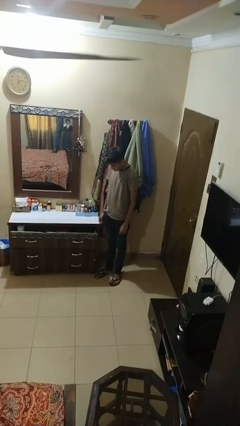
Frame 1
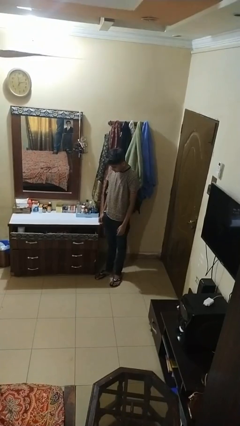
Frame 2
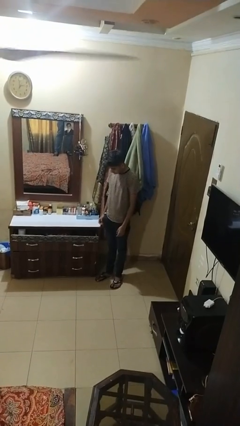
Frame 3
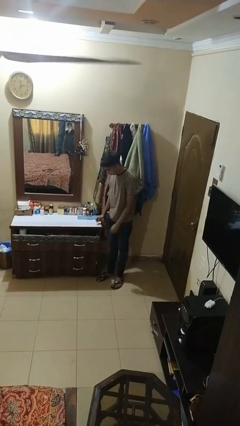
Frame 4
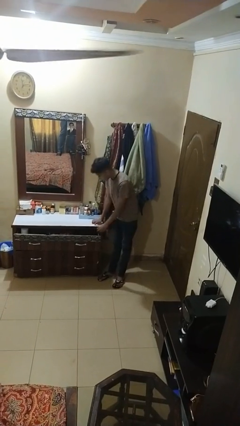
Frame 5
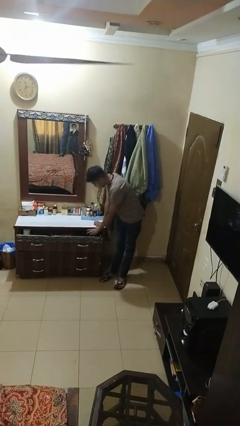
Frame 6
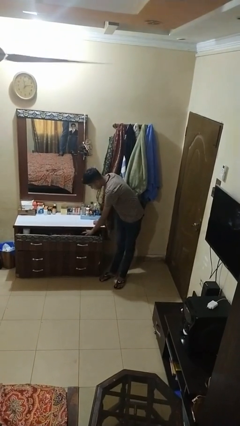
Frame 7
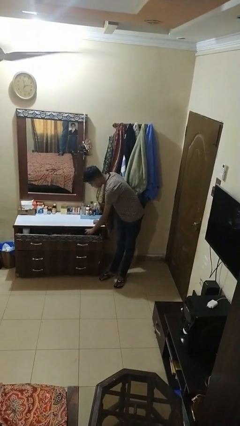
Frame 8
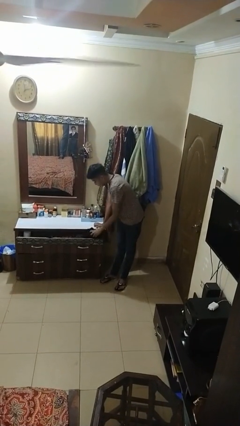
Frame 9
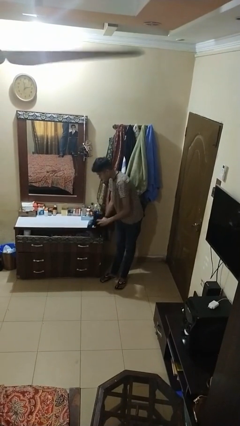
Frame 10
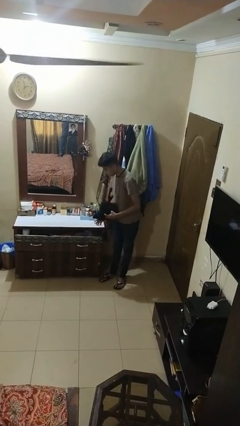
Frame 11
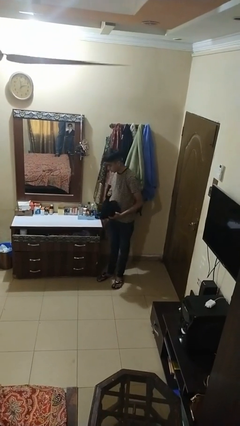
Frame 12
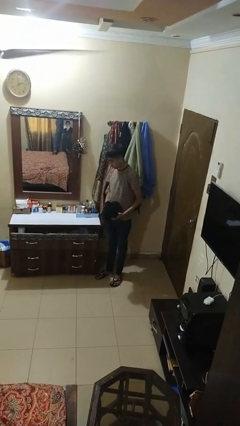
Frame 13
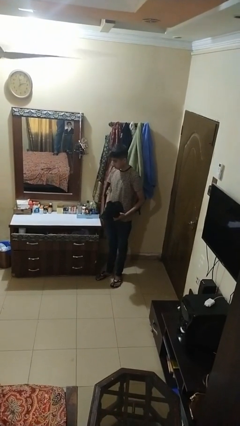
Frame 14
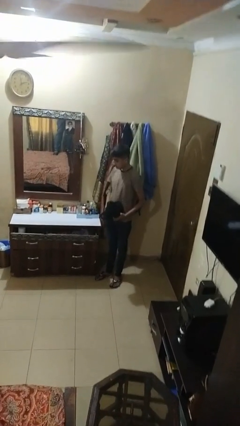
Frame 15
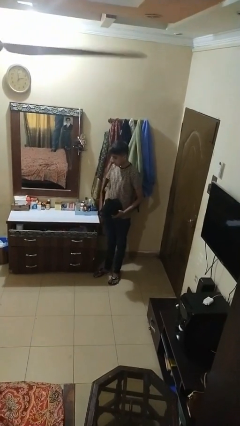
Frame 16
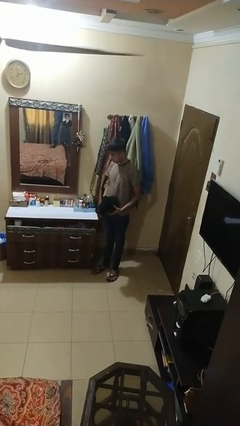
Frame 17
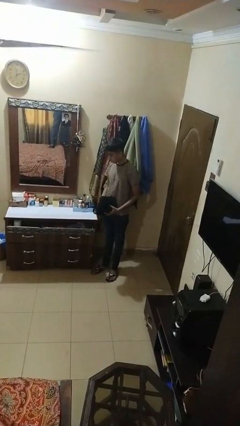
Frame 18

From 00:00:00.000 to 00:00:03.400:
person takes clothes from dresser

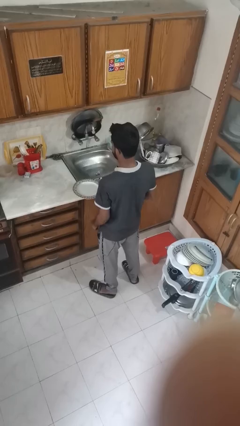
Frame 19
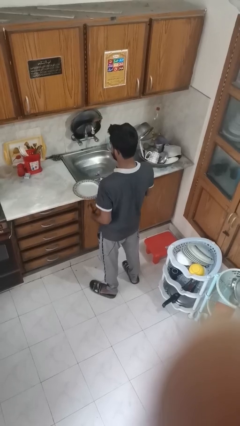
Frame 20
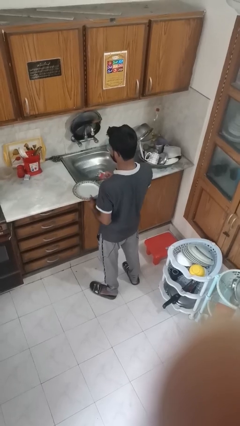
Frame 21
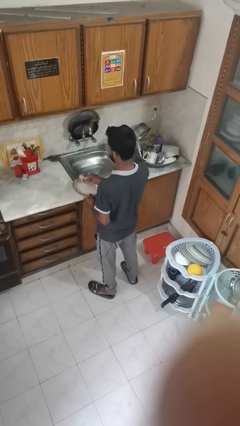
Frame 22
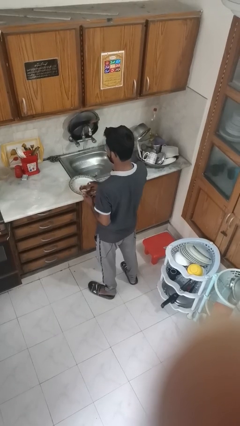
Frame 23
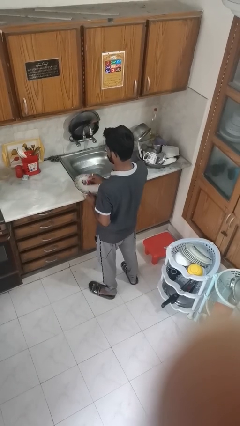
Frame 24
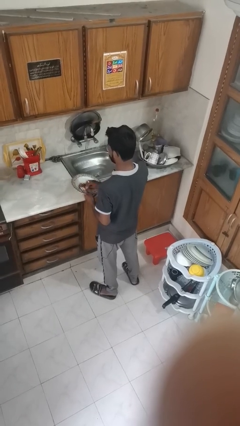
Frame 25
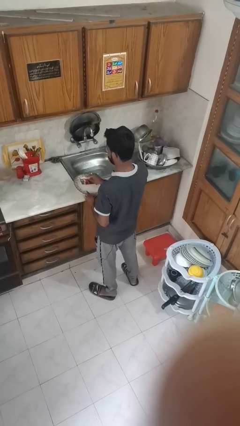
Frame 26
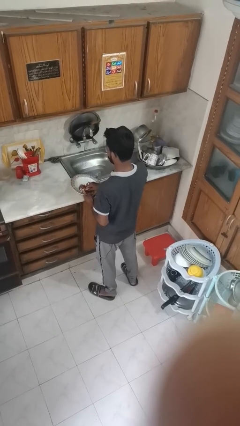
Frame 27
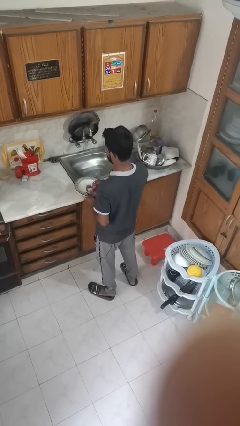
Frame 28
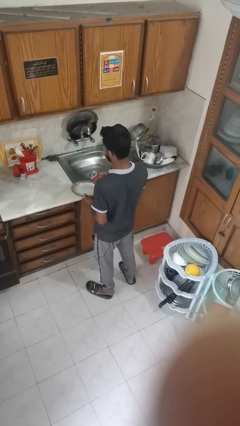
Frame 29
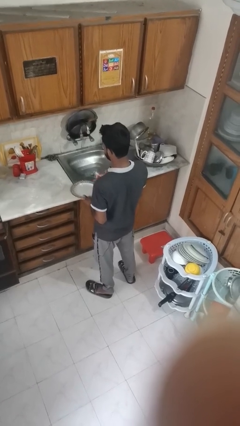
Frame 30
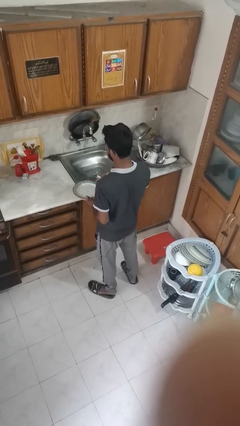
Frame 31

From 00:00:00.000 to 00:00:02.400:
person dries dish

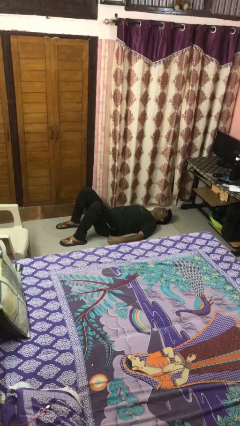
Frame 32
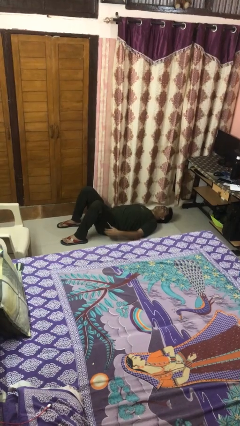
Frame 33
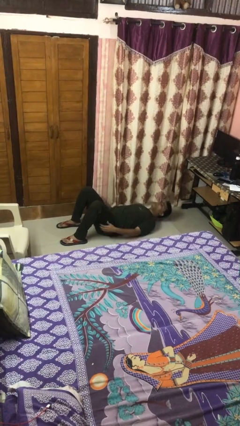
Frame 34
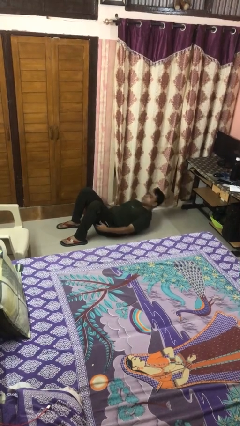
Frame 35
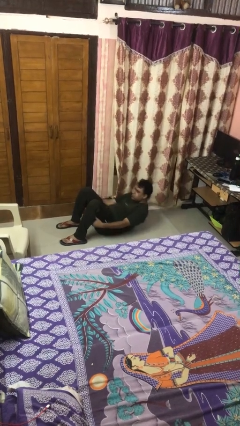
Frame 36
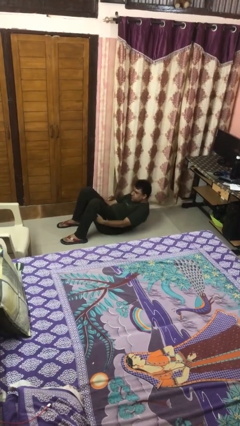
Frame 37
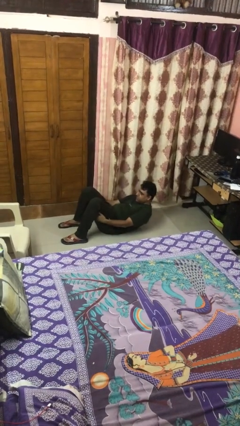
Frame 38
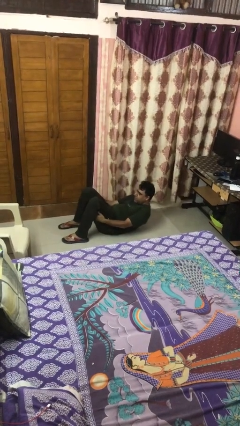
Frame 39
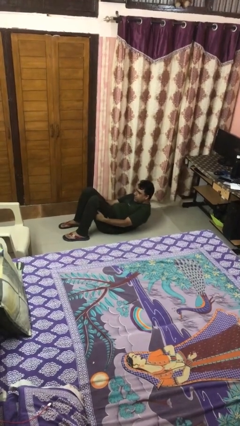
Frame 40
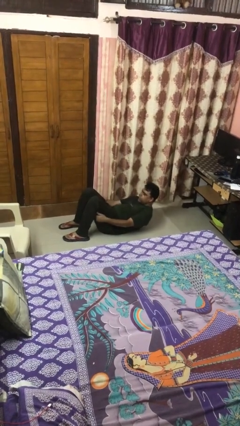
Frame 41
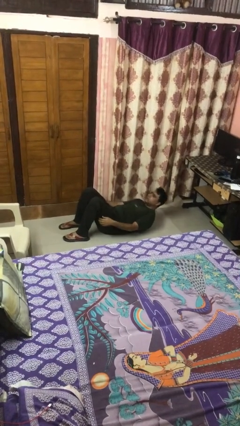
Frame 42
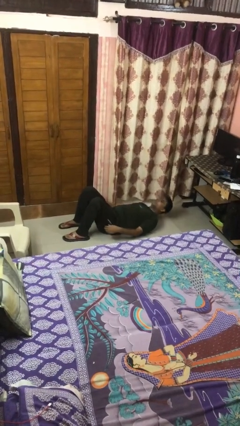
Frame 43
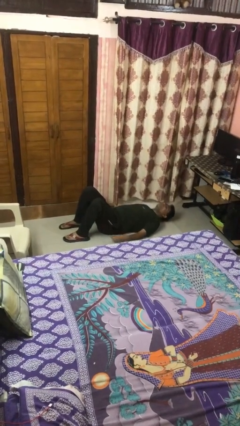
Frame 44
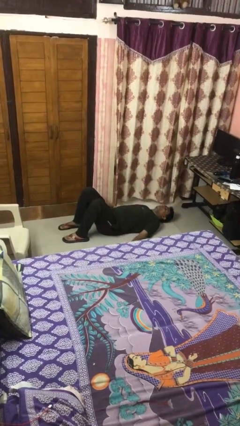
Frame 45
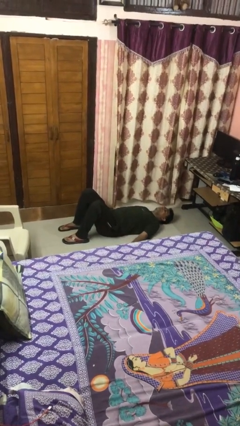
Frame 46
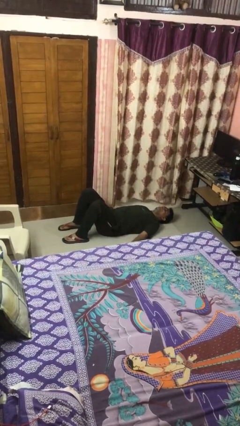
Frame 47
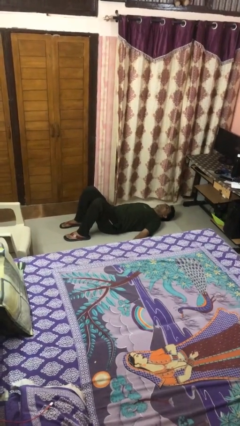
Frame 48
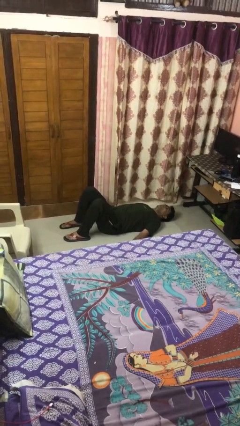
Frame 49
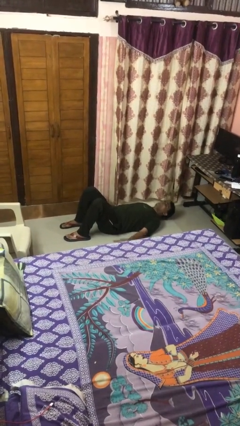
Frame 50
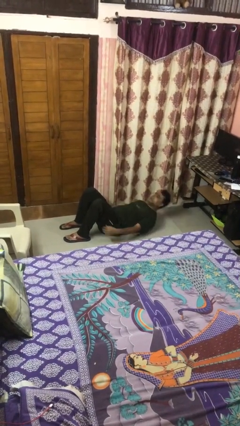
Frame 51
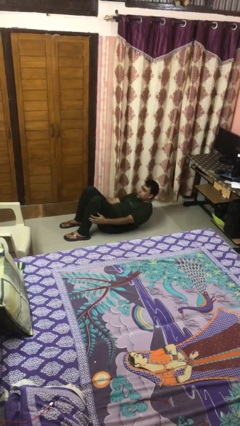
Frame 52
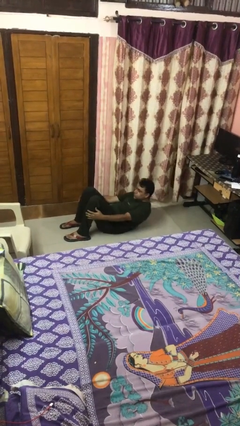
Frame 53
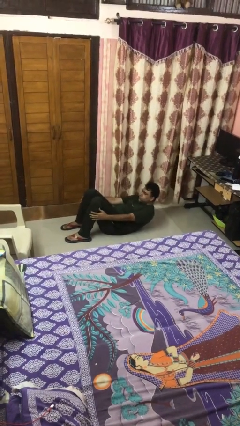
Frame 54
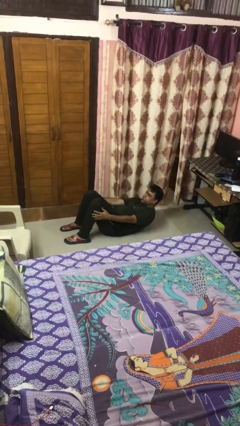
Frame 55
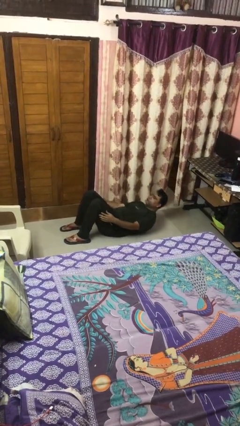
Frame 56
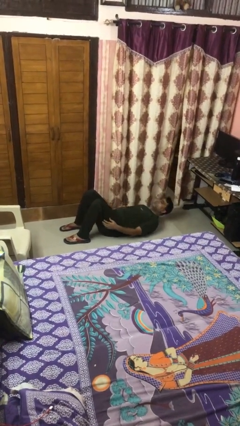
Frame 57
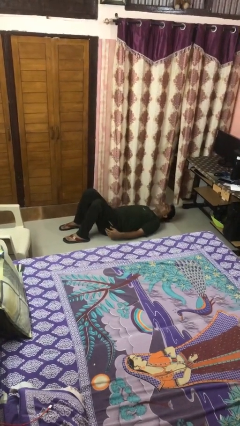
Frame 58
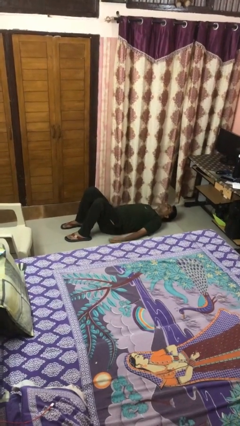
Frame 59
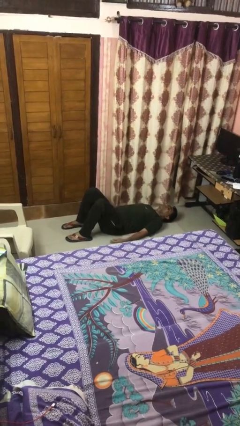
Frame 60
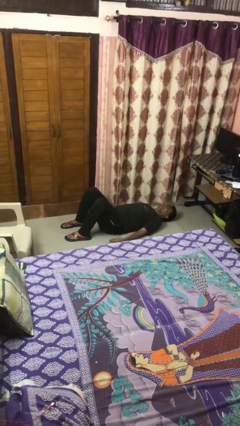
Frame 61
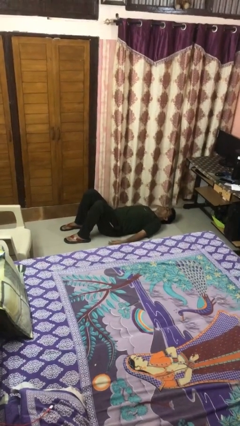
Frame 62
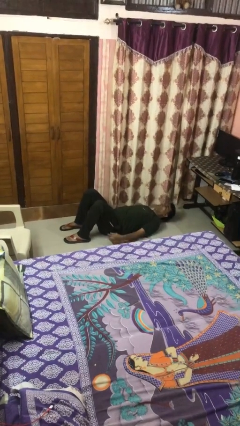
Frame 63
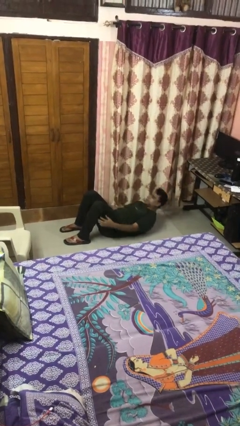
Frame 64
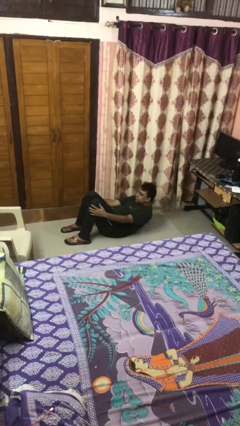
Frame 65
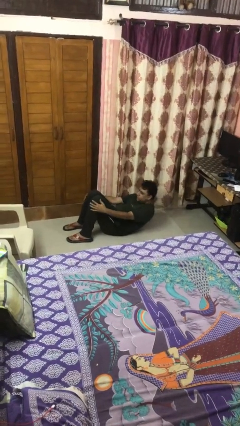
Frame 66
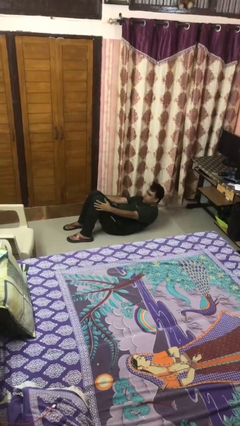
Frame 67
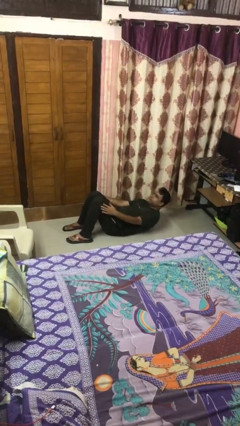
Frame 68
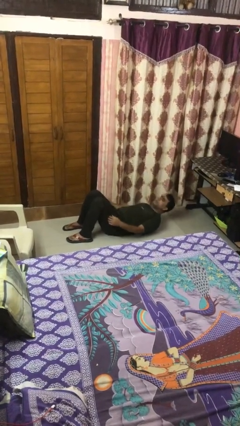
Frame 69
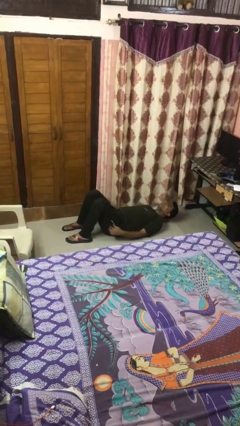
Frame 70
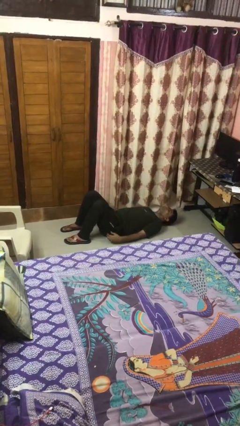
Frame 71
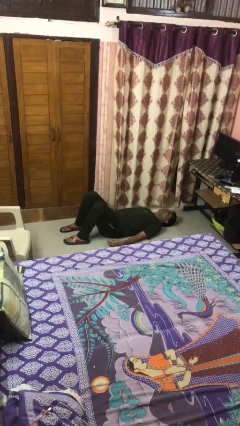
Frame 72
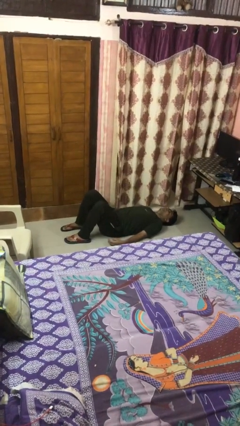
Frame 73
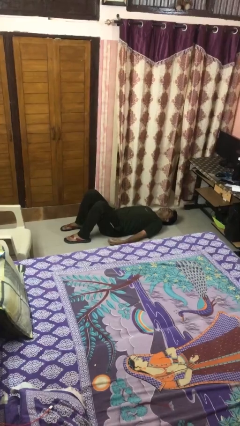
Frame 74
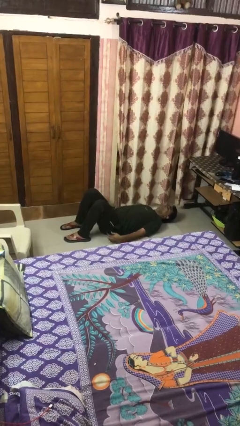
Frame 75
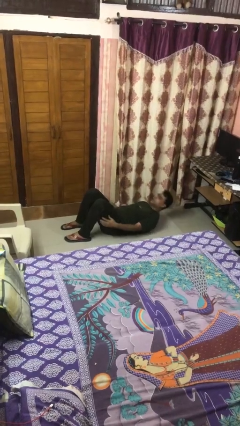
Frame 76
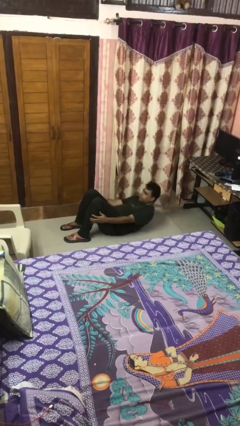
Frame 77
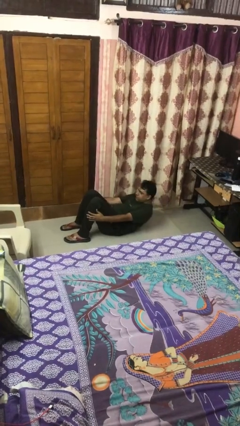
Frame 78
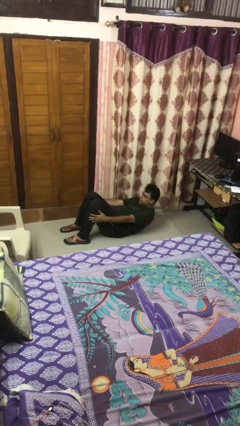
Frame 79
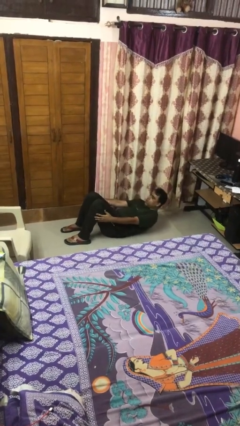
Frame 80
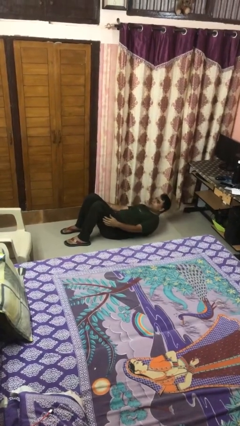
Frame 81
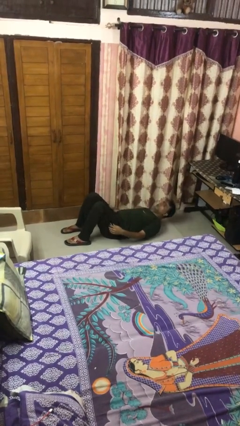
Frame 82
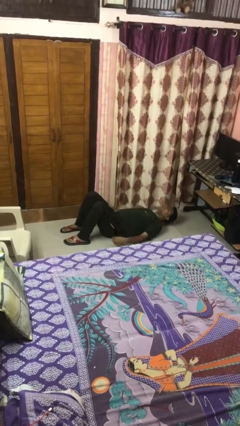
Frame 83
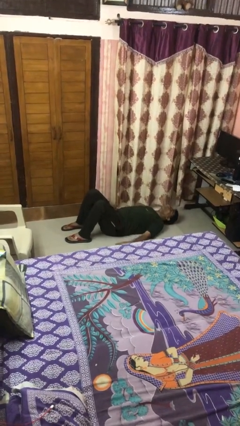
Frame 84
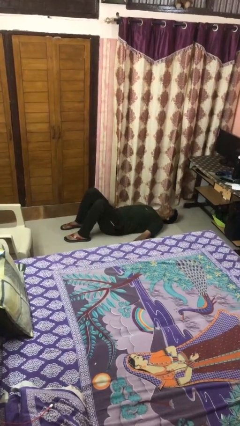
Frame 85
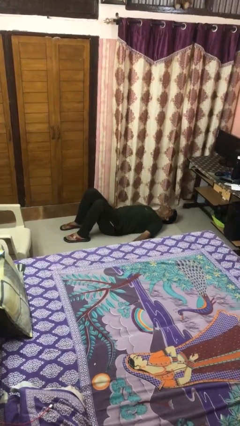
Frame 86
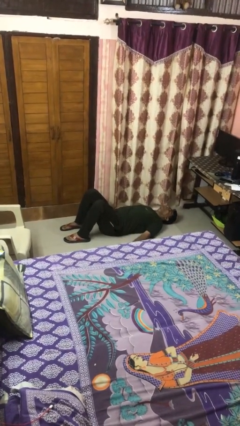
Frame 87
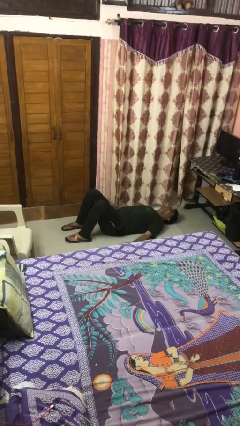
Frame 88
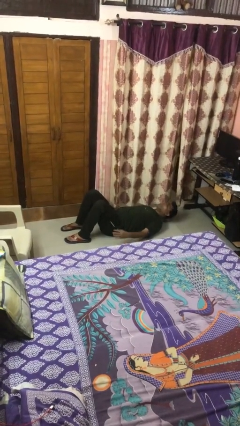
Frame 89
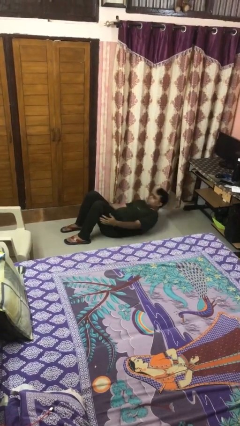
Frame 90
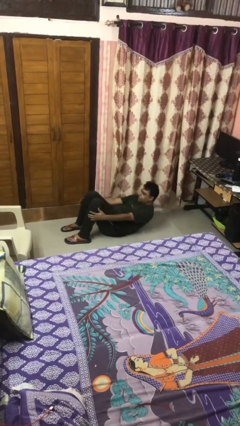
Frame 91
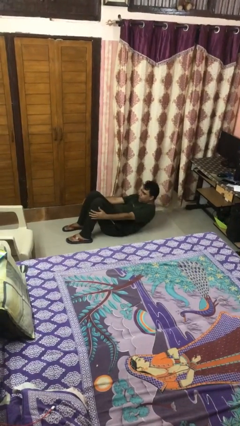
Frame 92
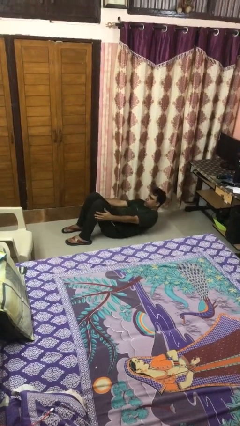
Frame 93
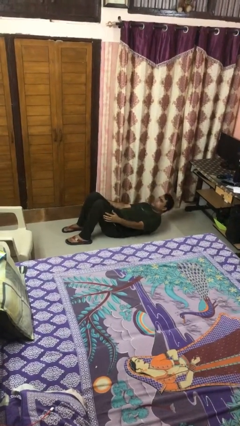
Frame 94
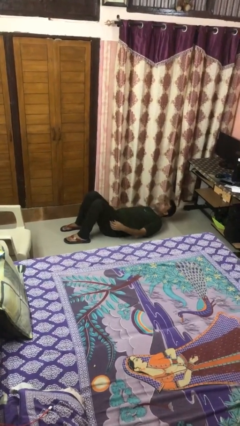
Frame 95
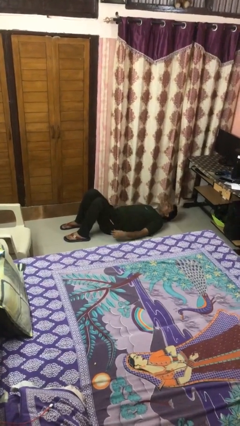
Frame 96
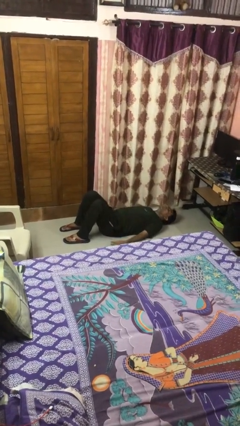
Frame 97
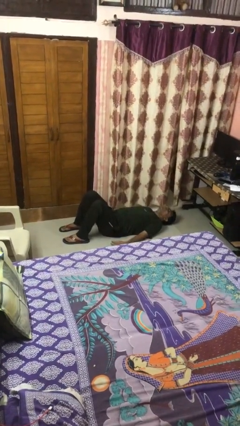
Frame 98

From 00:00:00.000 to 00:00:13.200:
person exercises with situp
